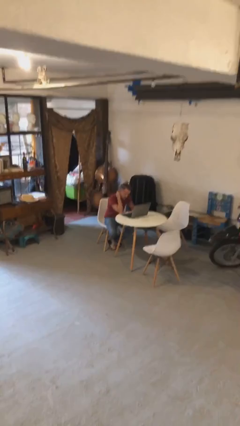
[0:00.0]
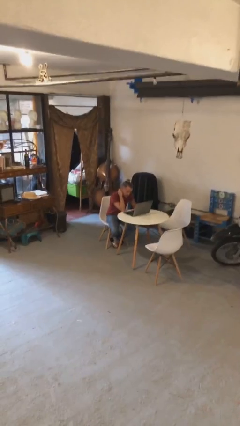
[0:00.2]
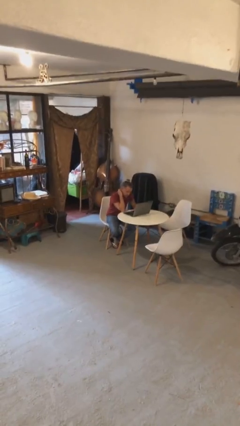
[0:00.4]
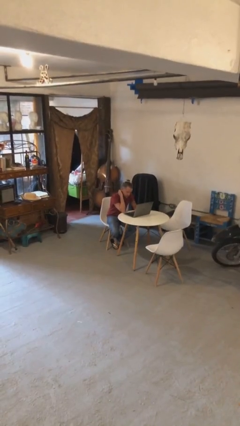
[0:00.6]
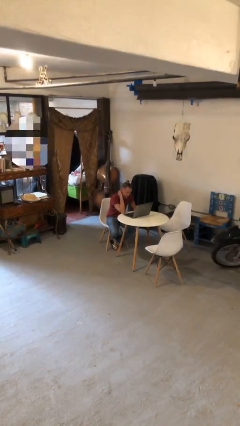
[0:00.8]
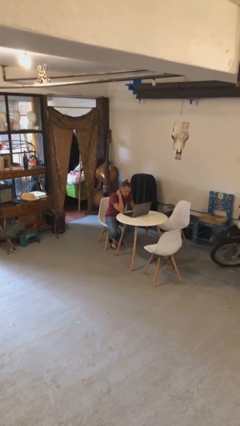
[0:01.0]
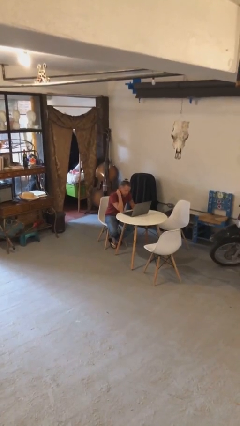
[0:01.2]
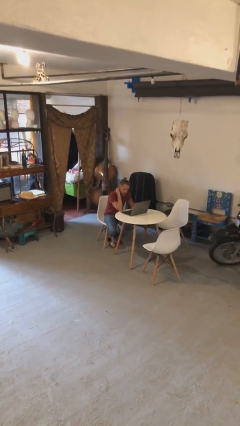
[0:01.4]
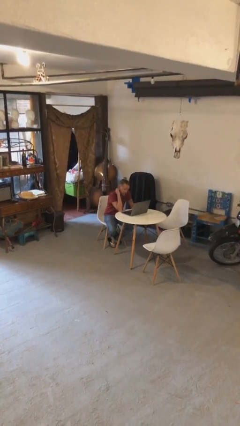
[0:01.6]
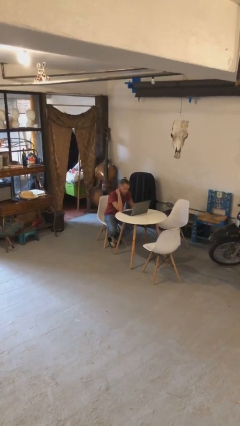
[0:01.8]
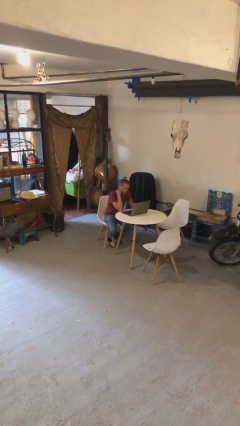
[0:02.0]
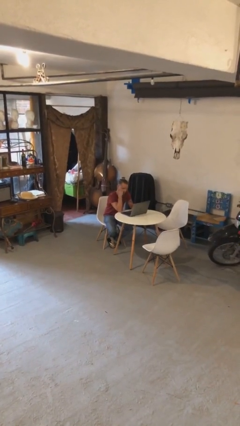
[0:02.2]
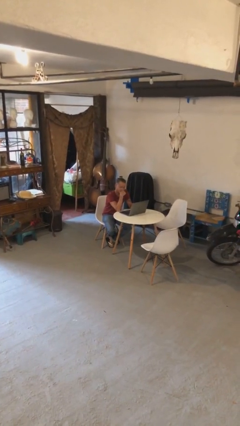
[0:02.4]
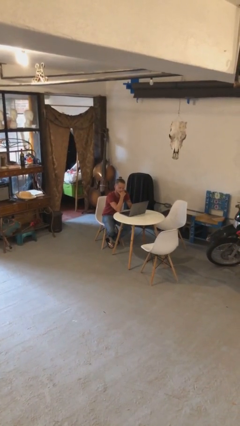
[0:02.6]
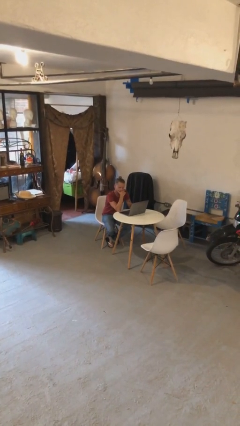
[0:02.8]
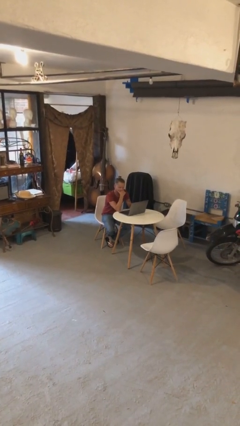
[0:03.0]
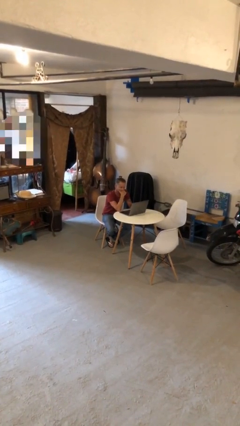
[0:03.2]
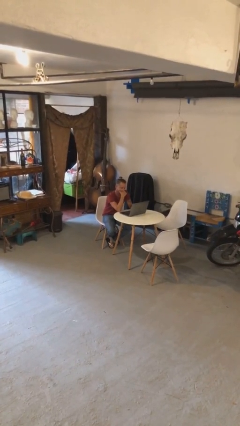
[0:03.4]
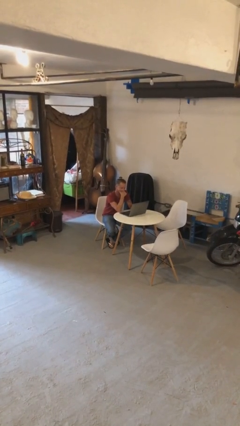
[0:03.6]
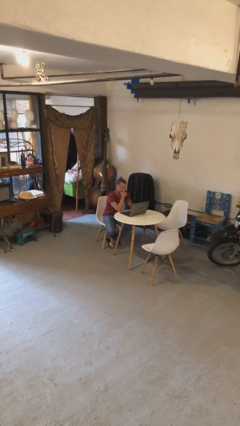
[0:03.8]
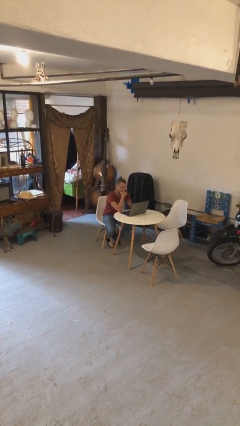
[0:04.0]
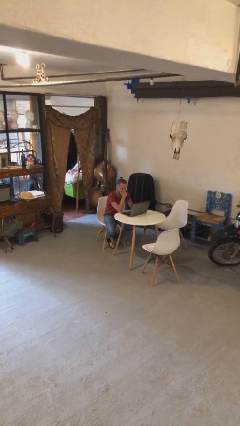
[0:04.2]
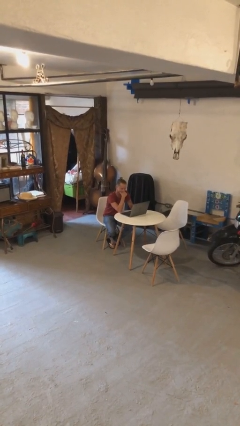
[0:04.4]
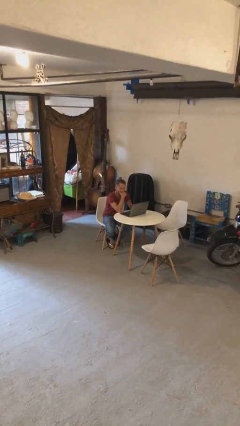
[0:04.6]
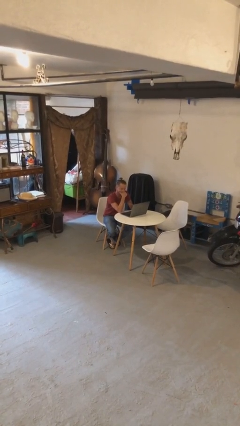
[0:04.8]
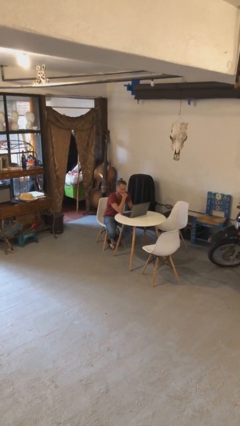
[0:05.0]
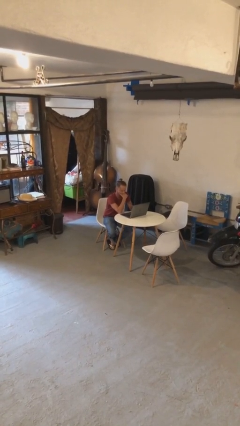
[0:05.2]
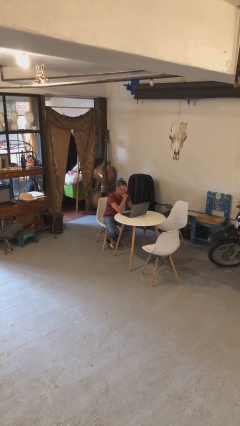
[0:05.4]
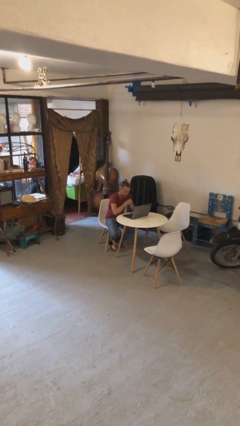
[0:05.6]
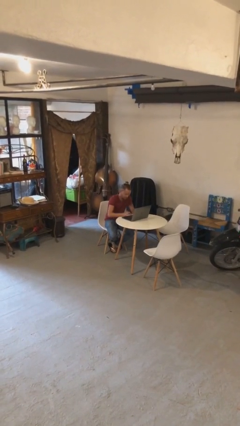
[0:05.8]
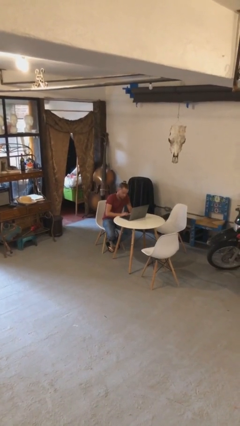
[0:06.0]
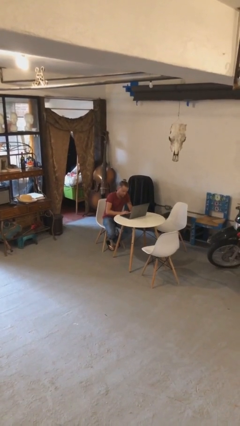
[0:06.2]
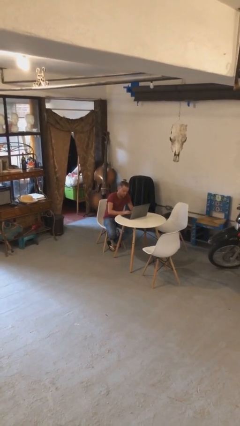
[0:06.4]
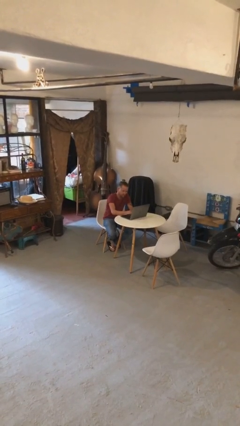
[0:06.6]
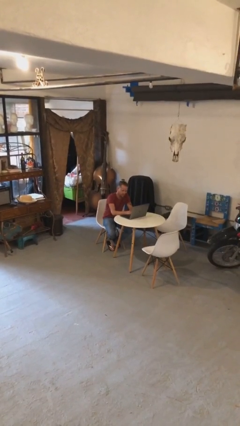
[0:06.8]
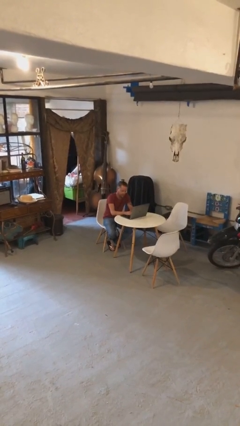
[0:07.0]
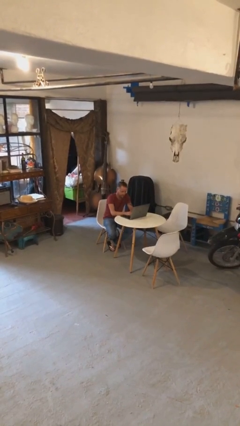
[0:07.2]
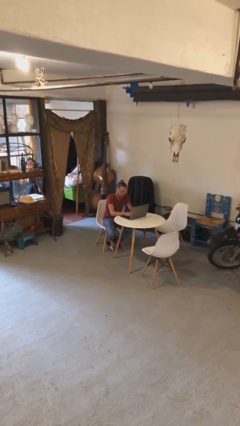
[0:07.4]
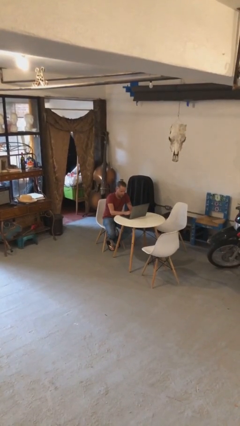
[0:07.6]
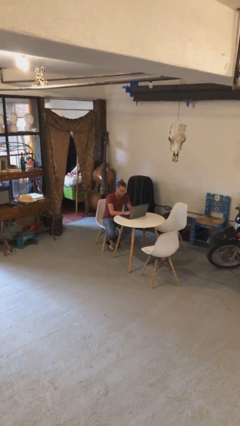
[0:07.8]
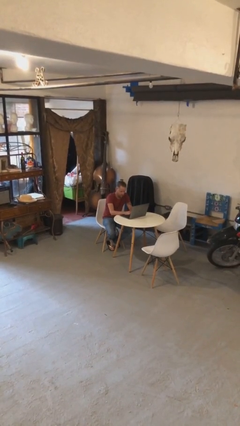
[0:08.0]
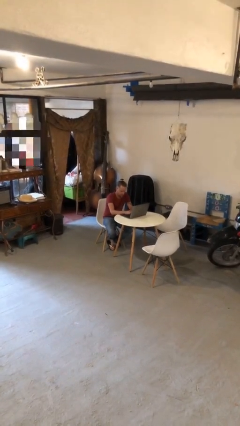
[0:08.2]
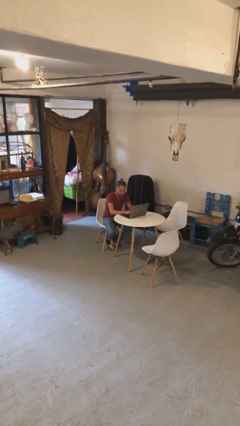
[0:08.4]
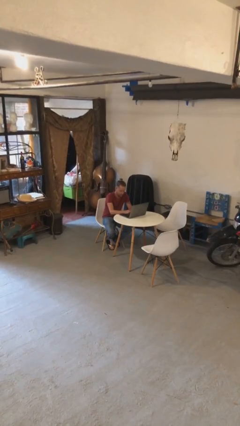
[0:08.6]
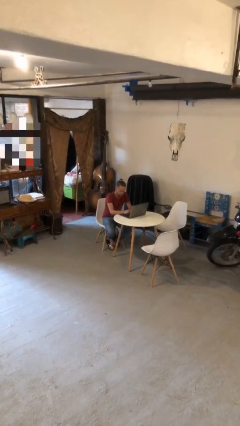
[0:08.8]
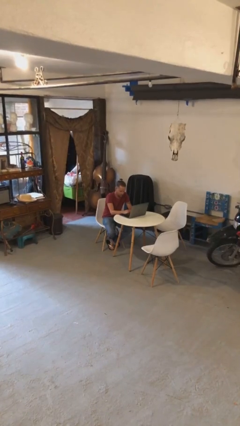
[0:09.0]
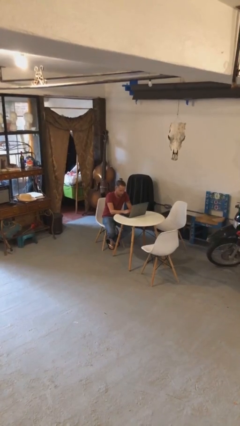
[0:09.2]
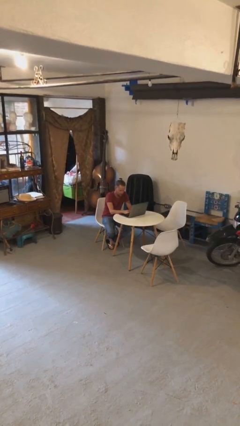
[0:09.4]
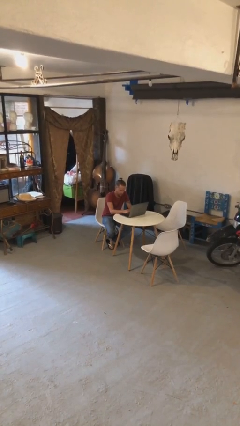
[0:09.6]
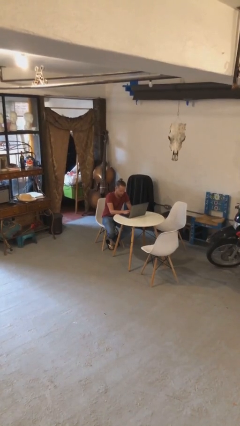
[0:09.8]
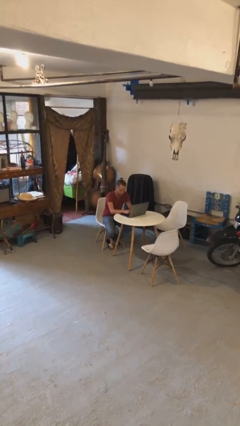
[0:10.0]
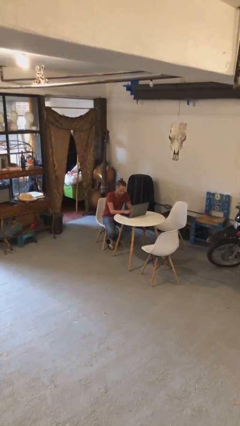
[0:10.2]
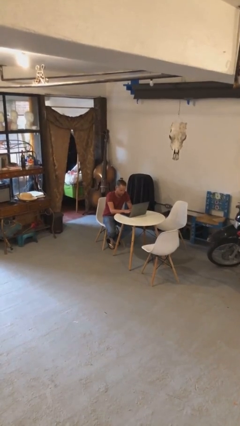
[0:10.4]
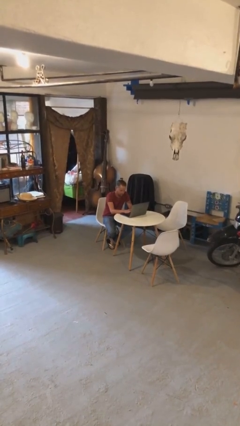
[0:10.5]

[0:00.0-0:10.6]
person interacts with laptop

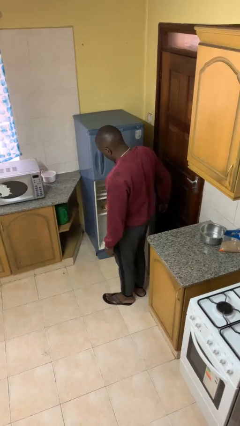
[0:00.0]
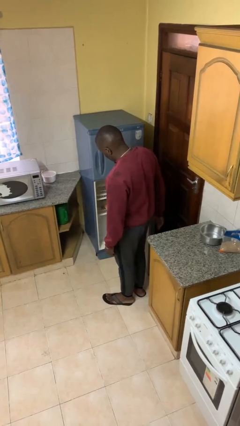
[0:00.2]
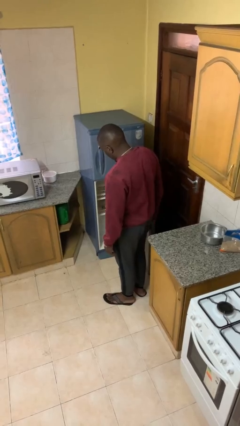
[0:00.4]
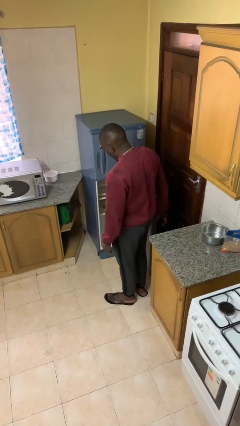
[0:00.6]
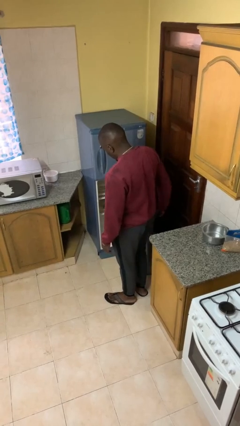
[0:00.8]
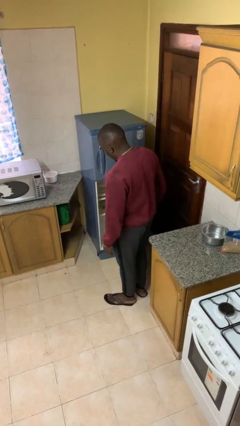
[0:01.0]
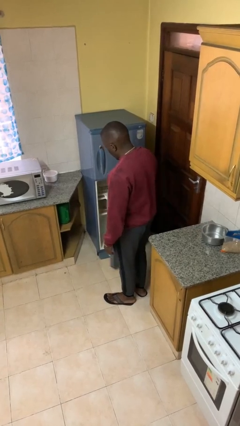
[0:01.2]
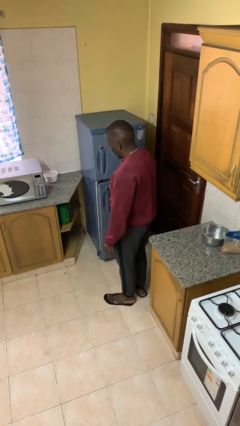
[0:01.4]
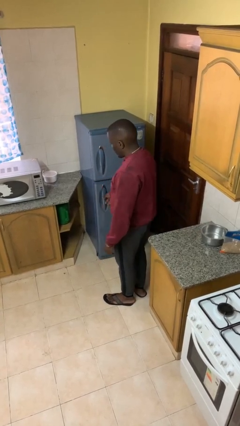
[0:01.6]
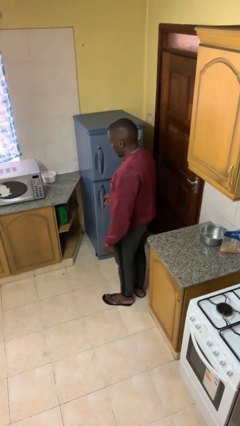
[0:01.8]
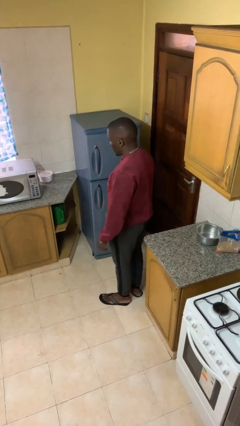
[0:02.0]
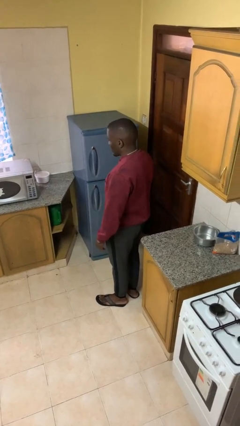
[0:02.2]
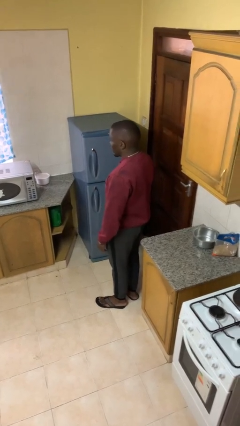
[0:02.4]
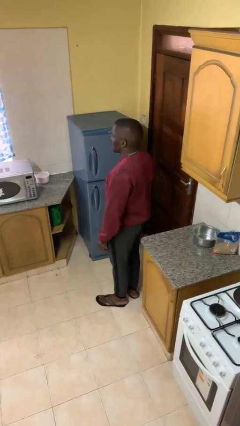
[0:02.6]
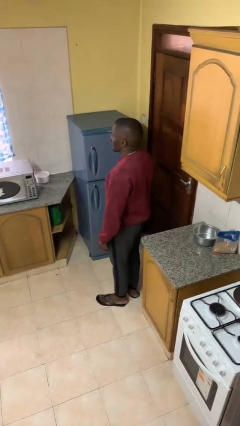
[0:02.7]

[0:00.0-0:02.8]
person closes refrigerator

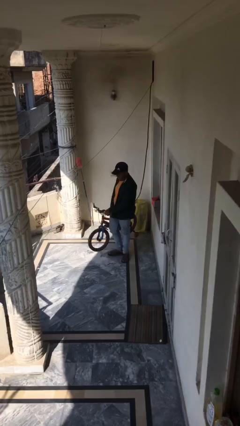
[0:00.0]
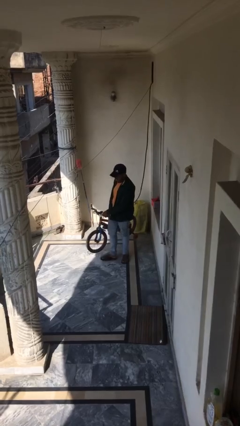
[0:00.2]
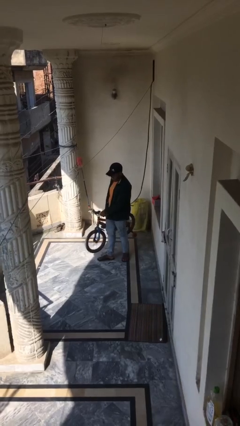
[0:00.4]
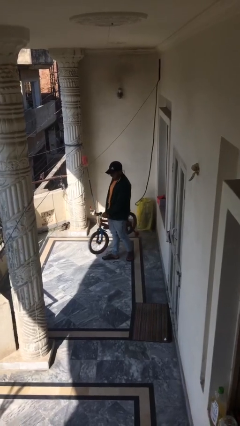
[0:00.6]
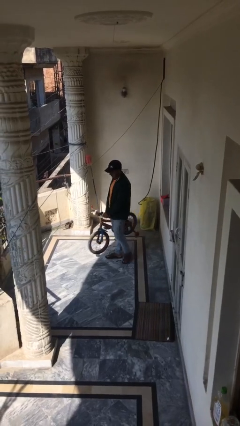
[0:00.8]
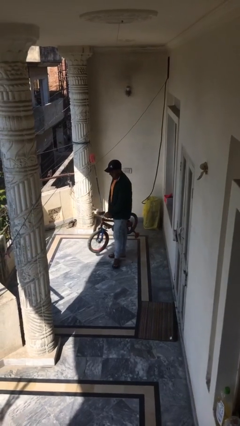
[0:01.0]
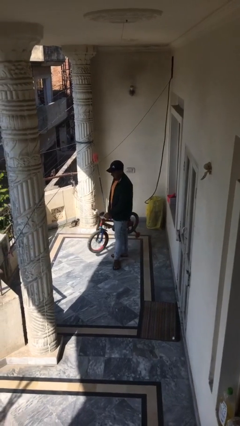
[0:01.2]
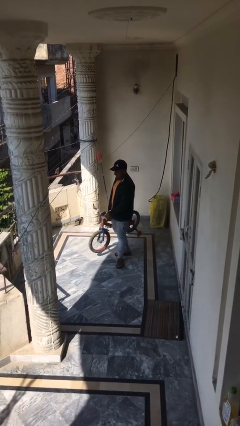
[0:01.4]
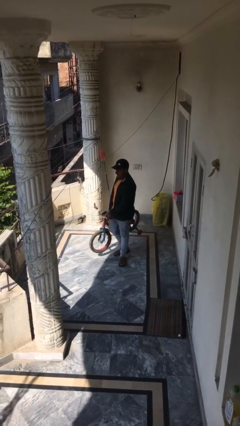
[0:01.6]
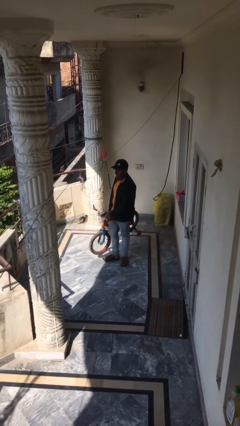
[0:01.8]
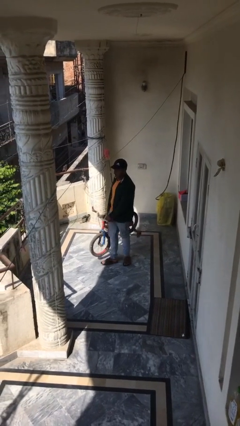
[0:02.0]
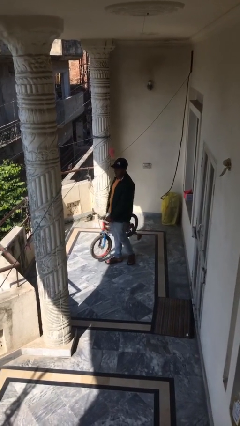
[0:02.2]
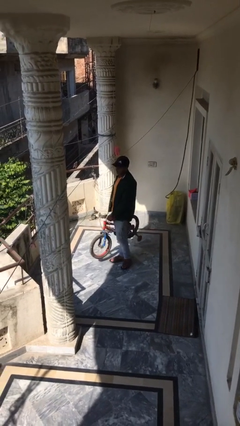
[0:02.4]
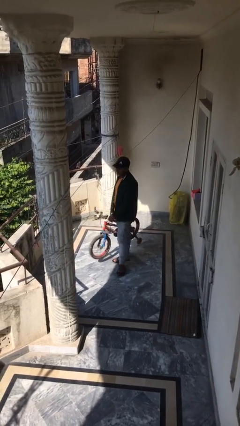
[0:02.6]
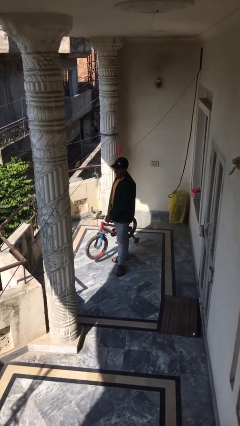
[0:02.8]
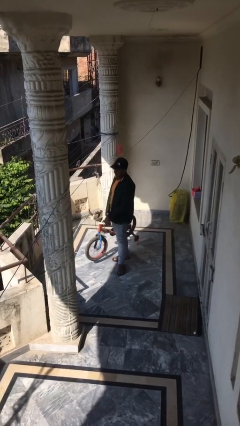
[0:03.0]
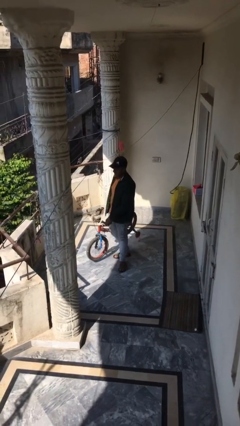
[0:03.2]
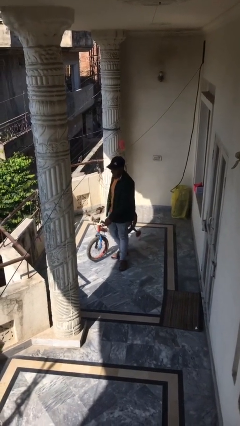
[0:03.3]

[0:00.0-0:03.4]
person carries heavy object

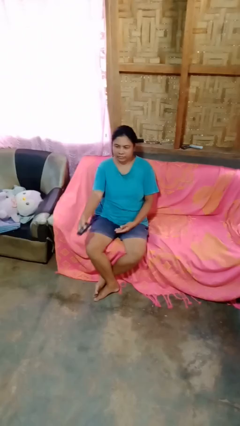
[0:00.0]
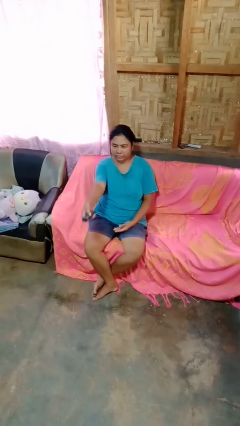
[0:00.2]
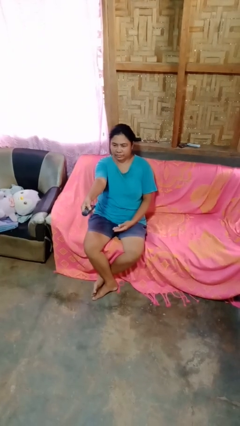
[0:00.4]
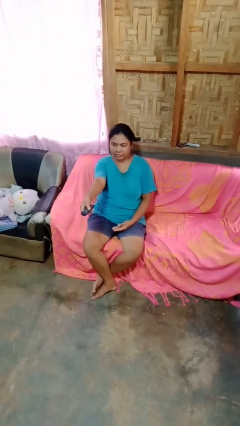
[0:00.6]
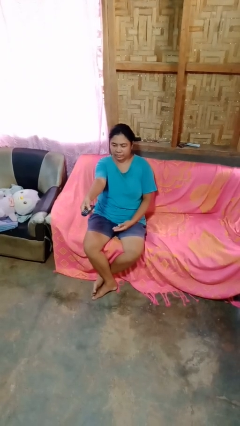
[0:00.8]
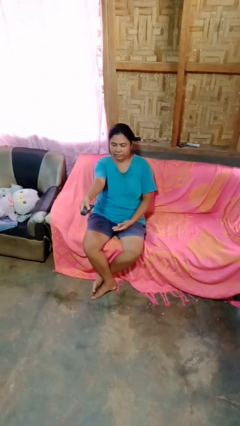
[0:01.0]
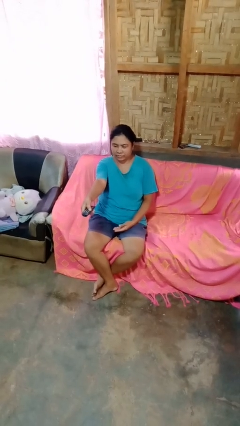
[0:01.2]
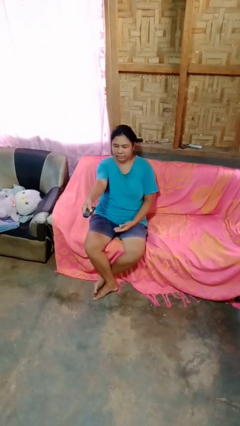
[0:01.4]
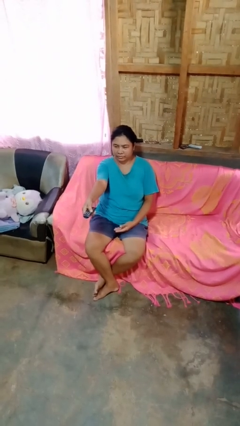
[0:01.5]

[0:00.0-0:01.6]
person uses television remote
